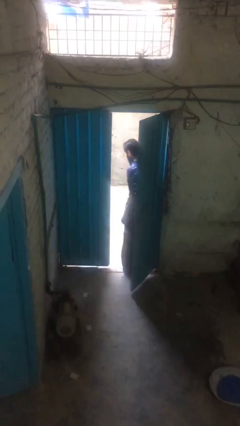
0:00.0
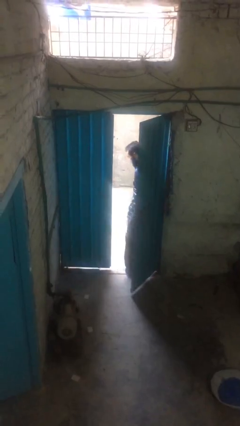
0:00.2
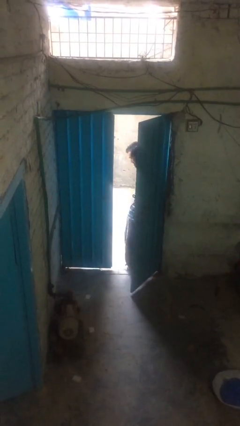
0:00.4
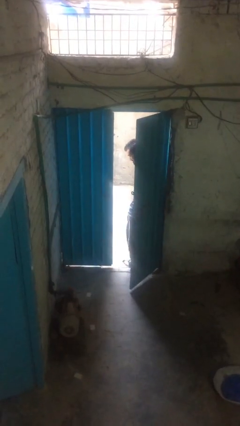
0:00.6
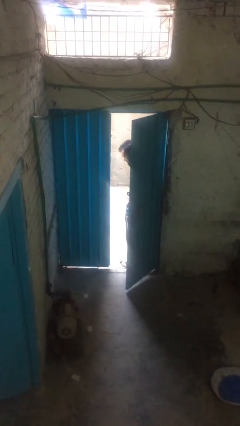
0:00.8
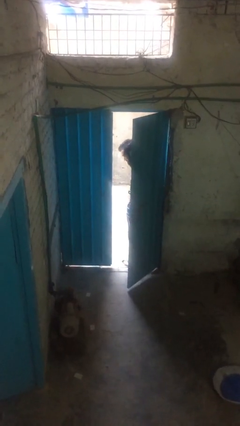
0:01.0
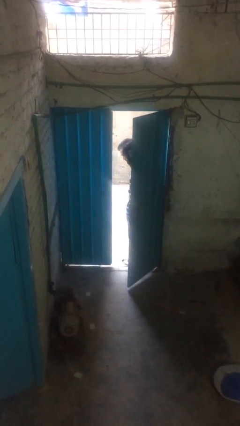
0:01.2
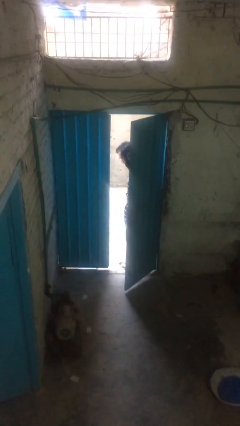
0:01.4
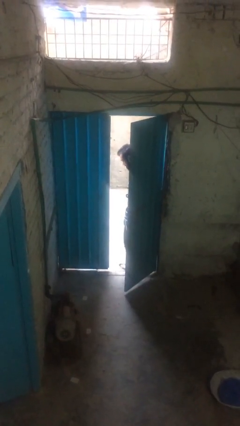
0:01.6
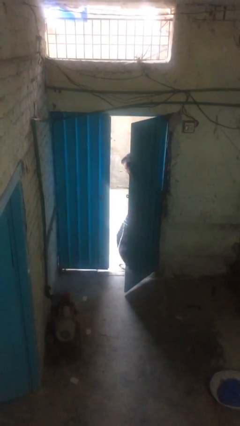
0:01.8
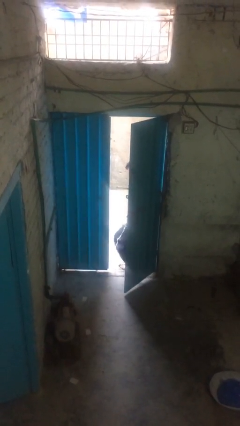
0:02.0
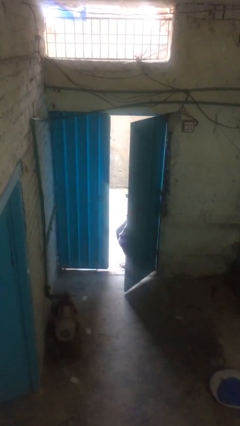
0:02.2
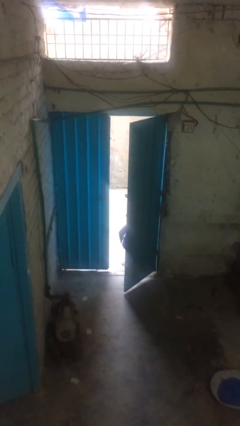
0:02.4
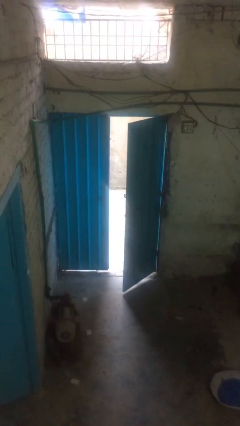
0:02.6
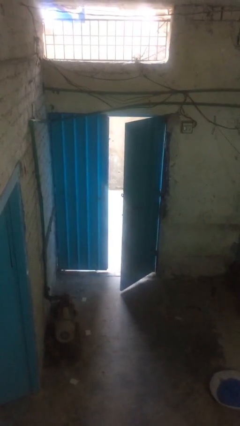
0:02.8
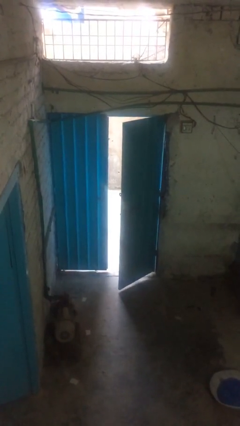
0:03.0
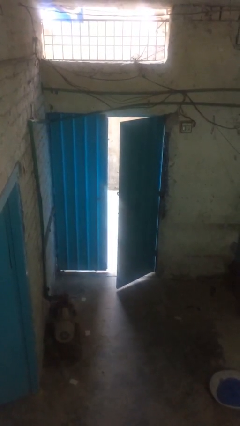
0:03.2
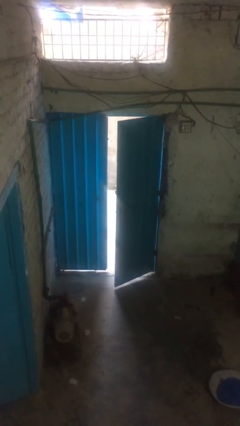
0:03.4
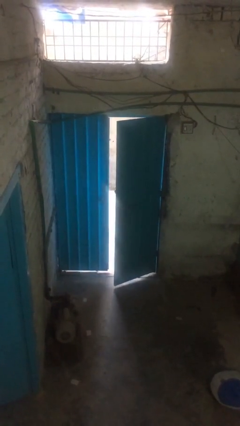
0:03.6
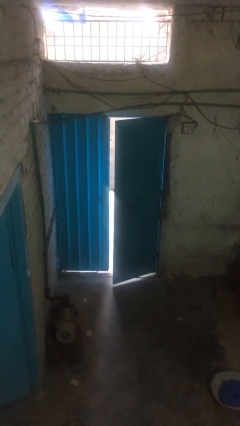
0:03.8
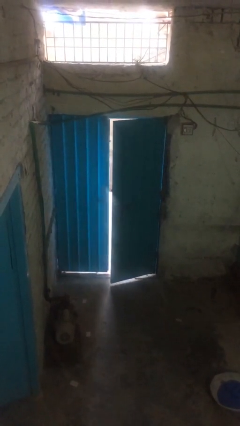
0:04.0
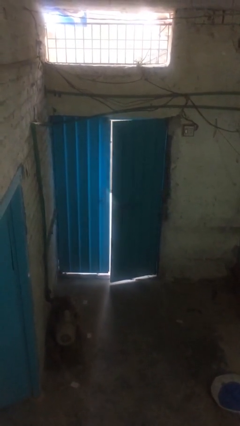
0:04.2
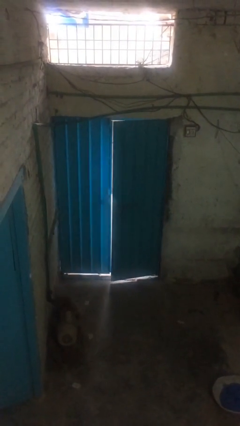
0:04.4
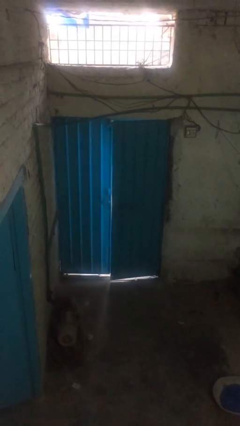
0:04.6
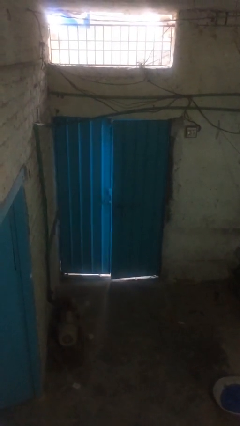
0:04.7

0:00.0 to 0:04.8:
person closes facility door

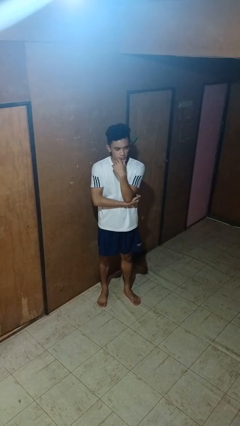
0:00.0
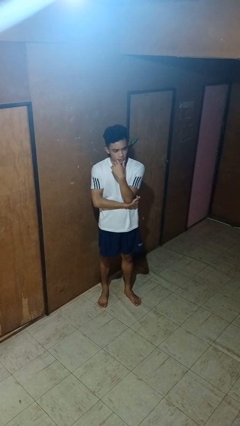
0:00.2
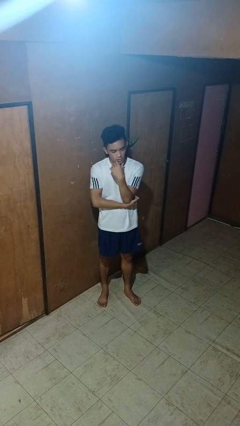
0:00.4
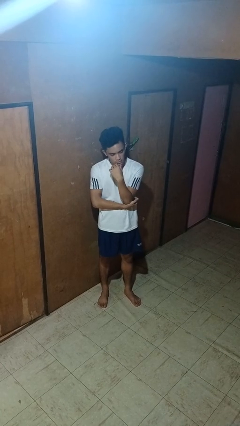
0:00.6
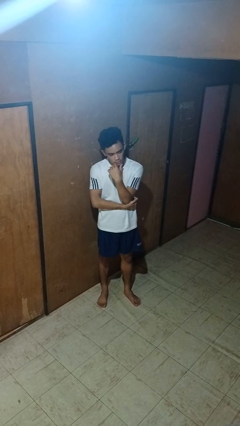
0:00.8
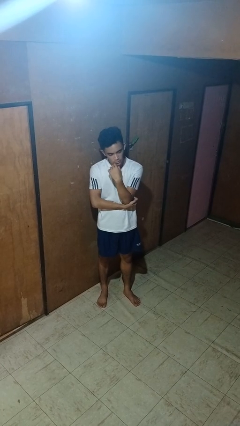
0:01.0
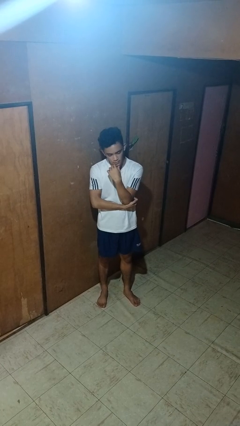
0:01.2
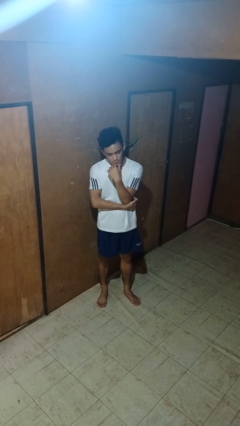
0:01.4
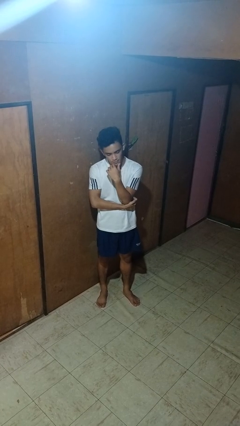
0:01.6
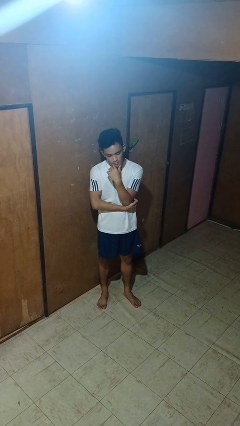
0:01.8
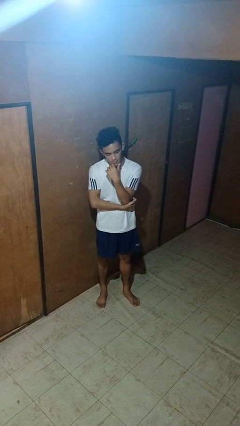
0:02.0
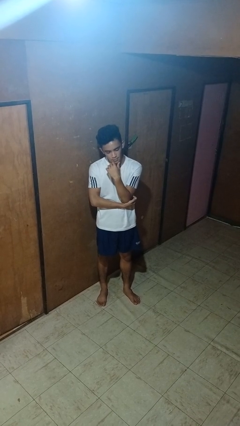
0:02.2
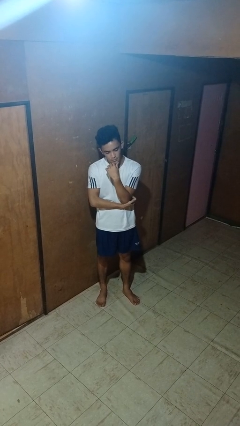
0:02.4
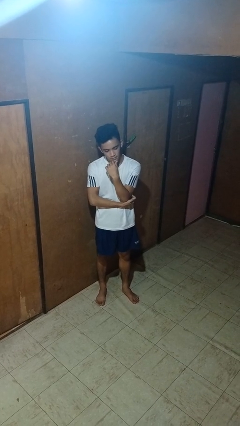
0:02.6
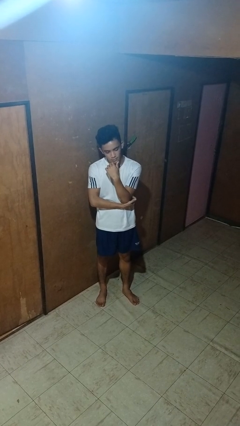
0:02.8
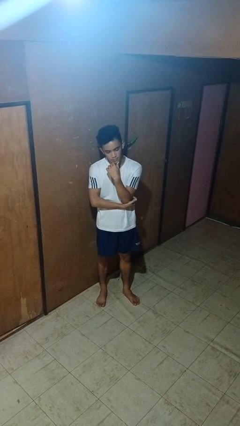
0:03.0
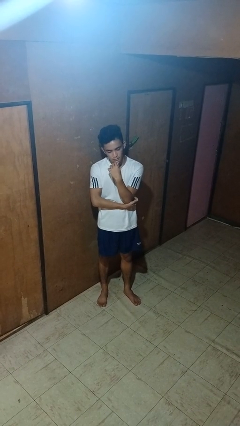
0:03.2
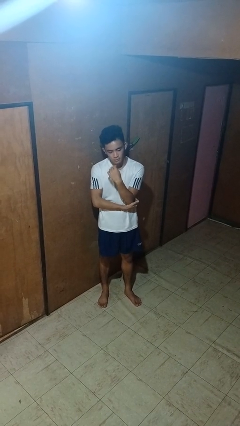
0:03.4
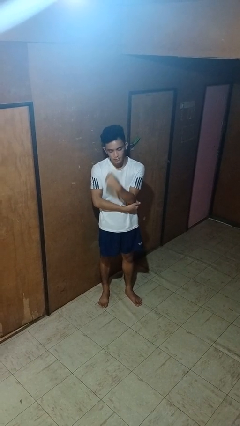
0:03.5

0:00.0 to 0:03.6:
person strokes chin

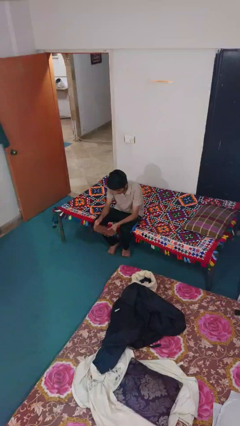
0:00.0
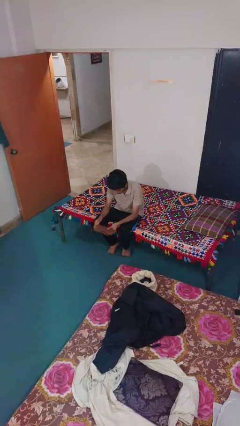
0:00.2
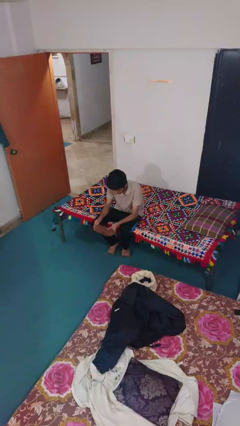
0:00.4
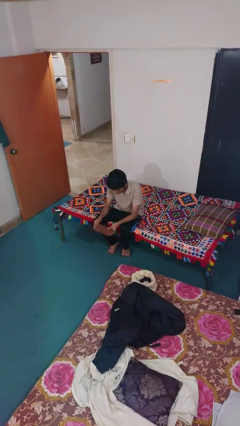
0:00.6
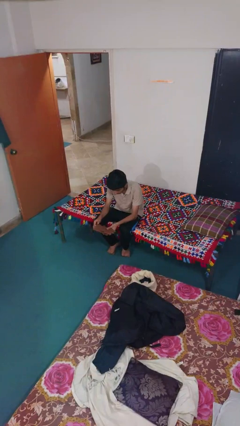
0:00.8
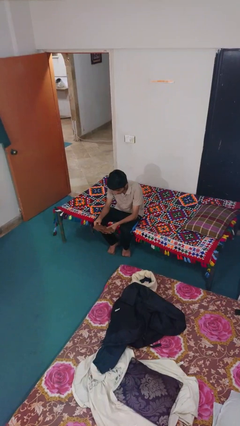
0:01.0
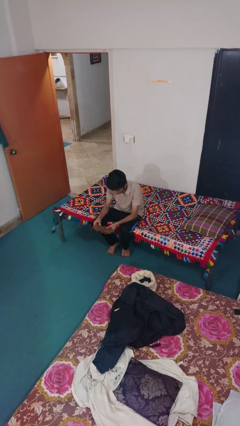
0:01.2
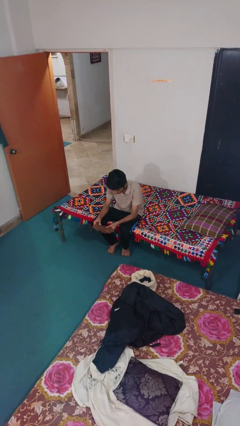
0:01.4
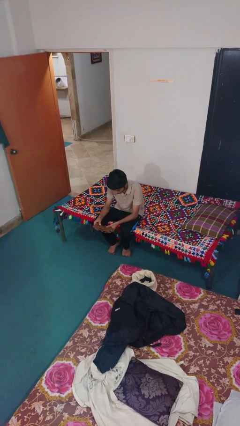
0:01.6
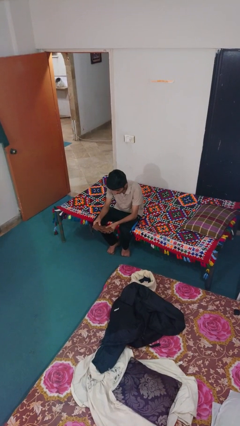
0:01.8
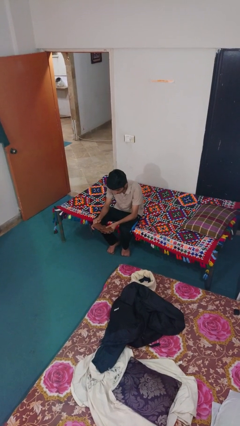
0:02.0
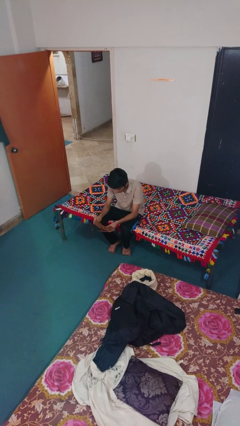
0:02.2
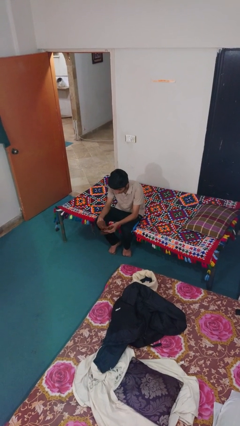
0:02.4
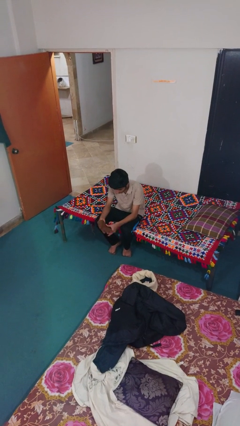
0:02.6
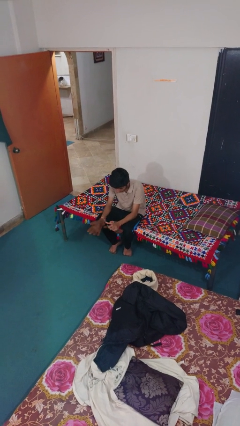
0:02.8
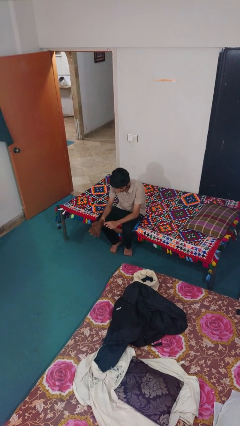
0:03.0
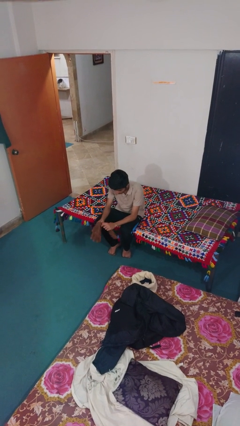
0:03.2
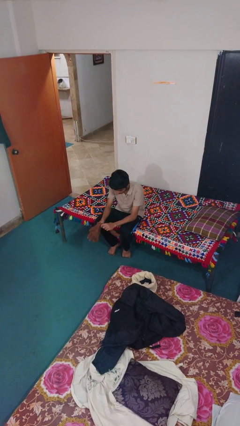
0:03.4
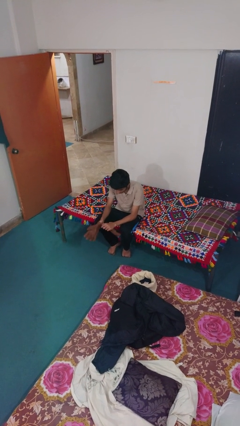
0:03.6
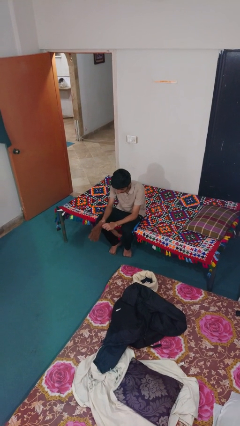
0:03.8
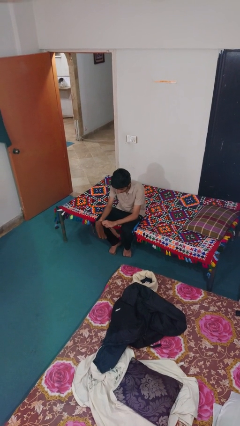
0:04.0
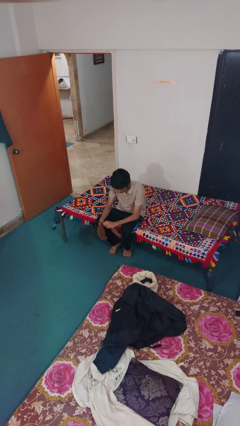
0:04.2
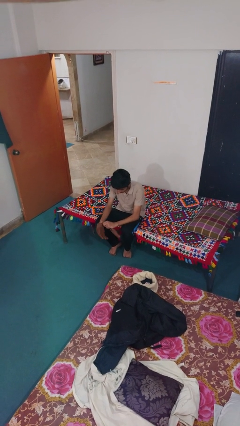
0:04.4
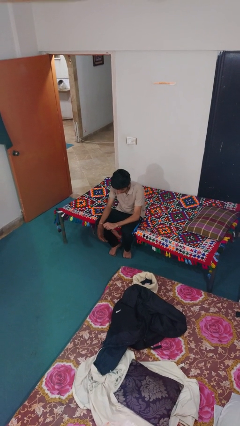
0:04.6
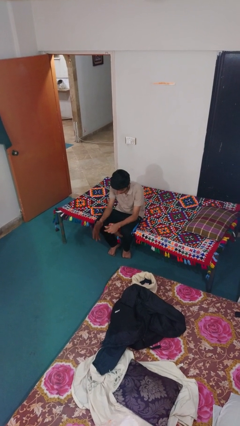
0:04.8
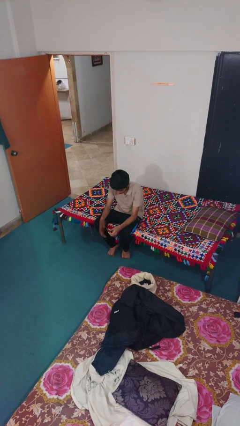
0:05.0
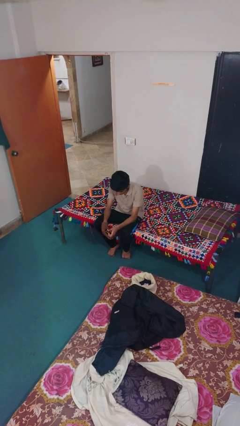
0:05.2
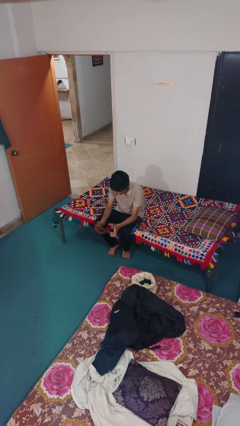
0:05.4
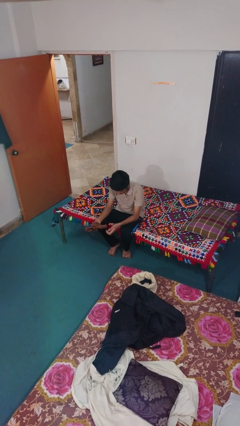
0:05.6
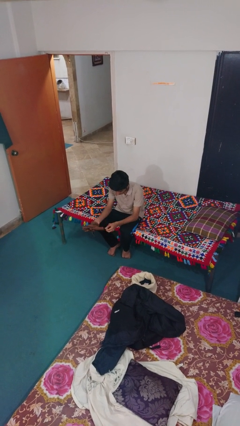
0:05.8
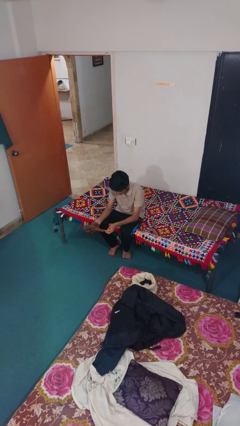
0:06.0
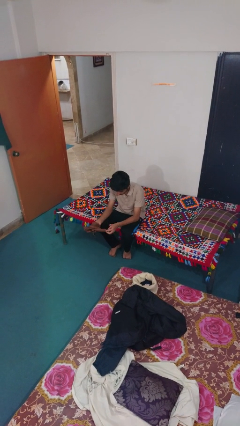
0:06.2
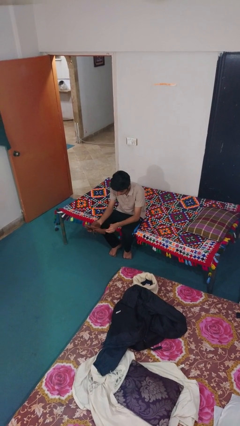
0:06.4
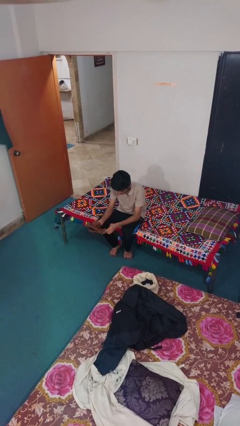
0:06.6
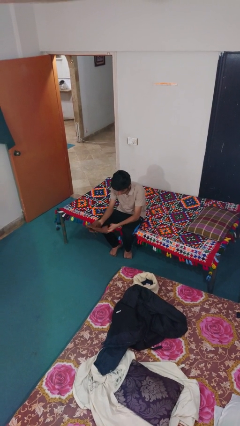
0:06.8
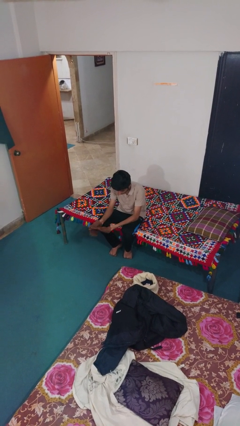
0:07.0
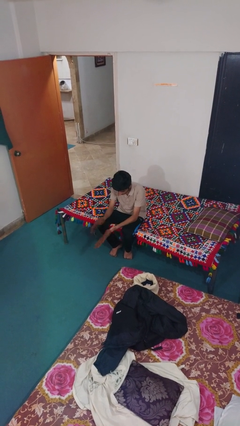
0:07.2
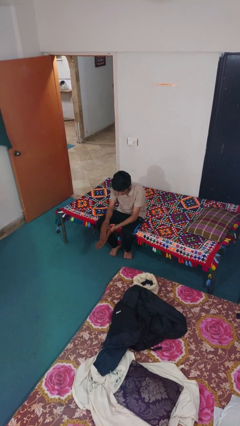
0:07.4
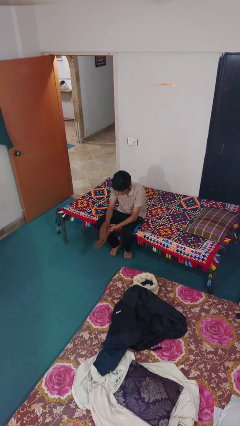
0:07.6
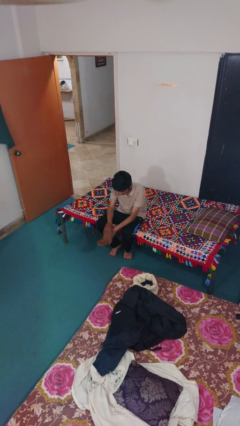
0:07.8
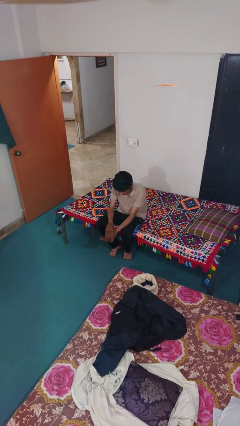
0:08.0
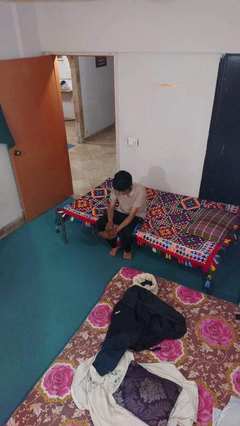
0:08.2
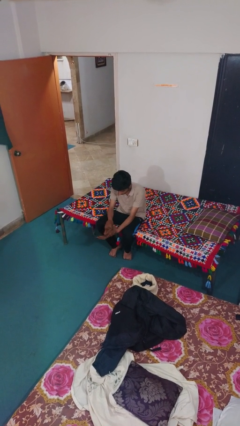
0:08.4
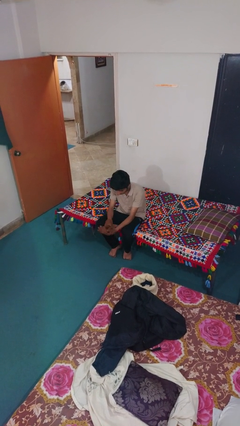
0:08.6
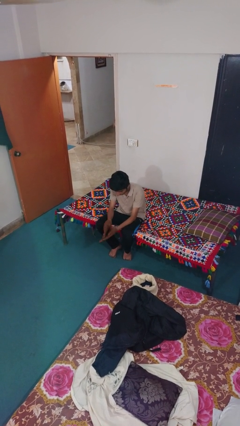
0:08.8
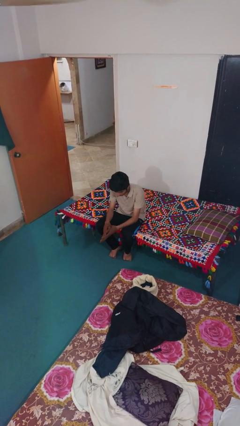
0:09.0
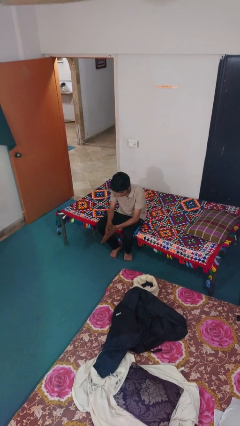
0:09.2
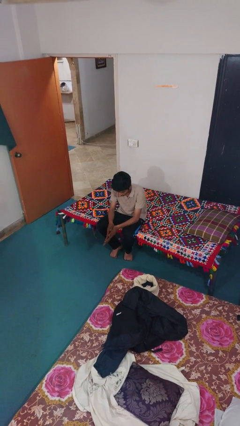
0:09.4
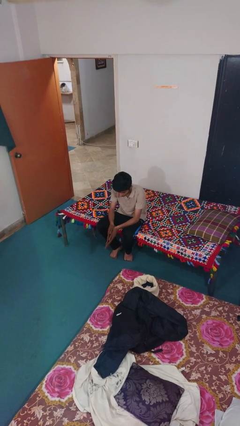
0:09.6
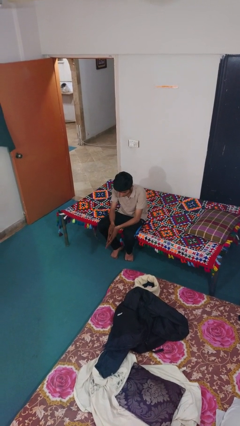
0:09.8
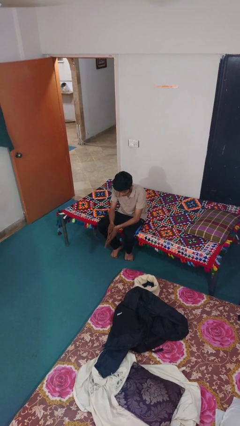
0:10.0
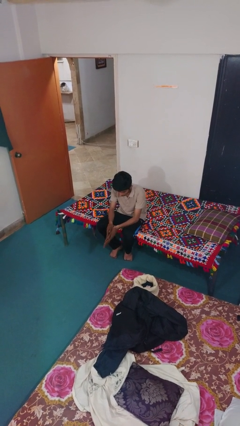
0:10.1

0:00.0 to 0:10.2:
person puts on gloves
